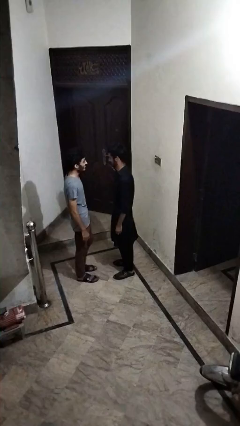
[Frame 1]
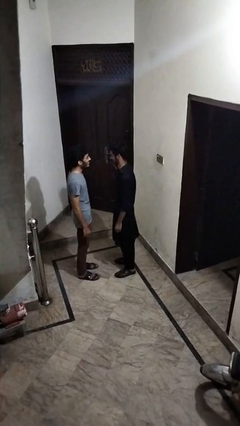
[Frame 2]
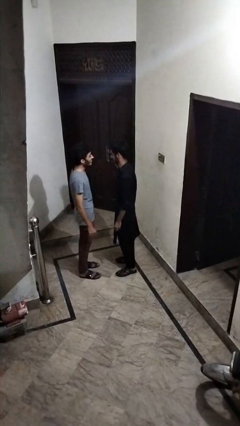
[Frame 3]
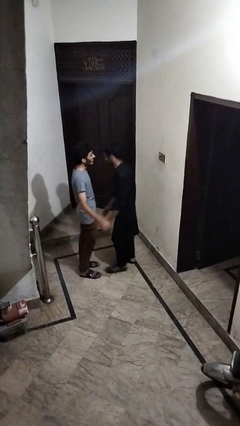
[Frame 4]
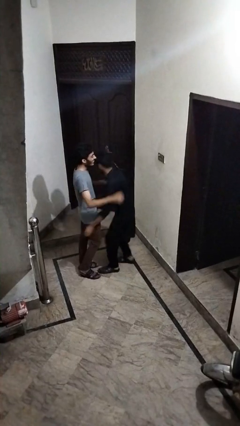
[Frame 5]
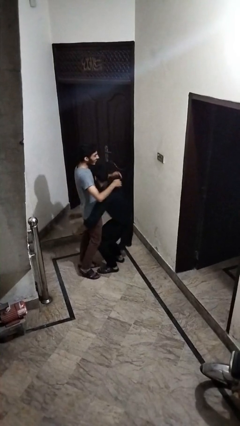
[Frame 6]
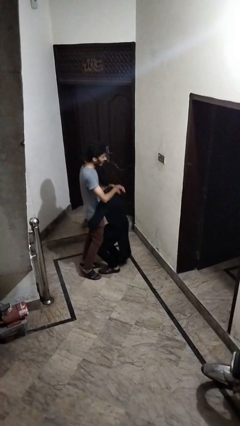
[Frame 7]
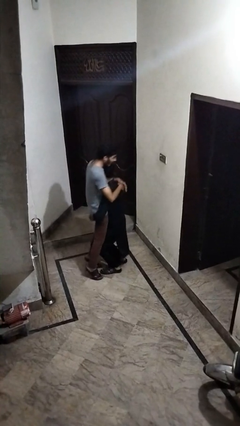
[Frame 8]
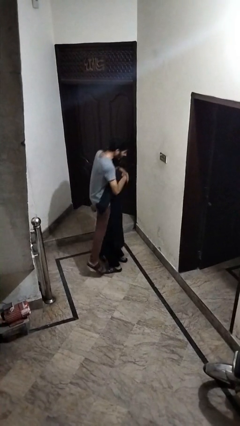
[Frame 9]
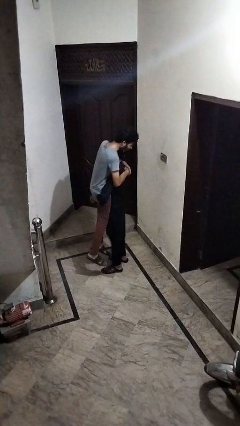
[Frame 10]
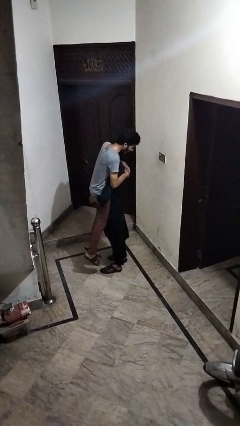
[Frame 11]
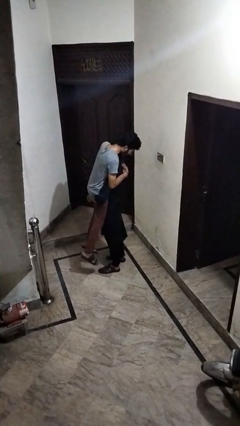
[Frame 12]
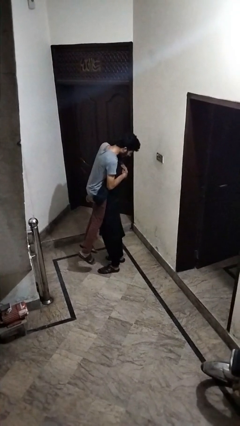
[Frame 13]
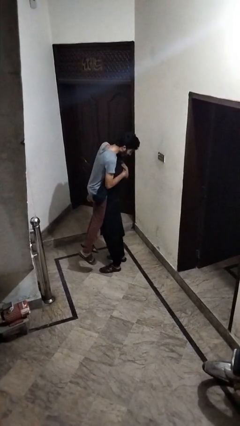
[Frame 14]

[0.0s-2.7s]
person picks up person

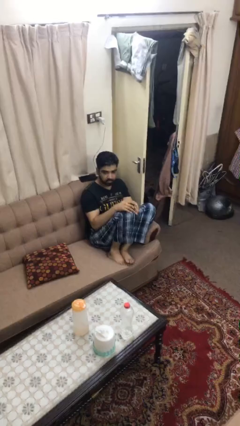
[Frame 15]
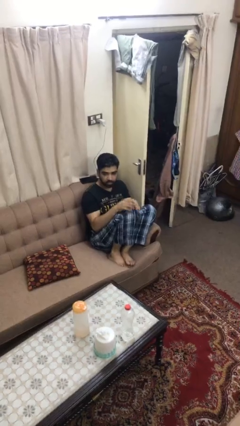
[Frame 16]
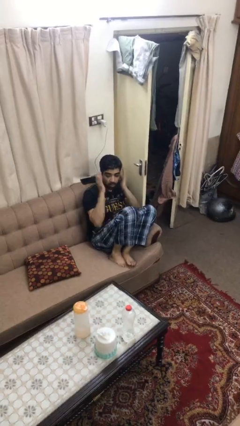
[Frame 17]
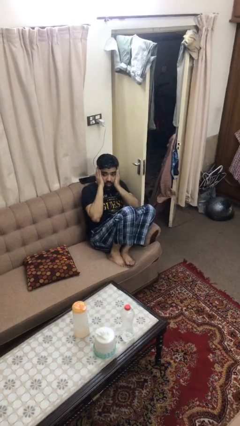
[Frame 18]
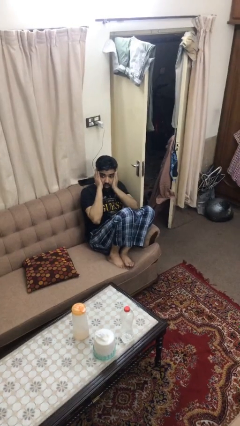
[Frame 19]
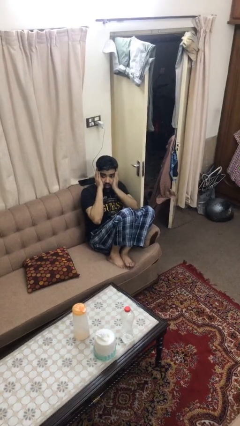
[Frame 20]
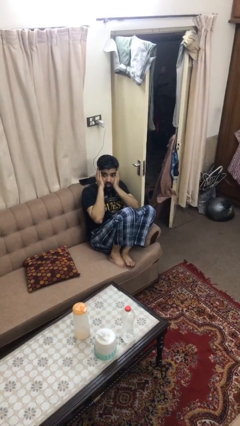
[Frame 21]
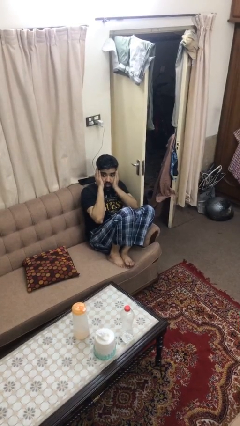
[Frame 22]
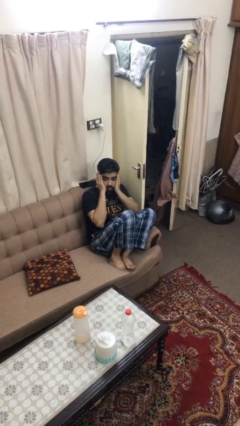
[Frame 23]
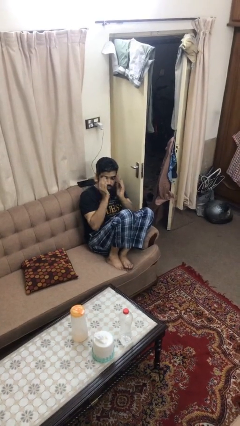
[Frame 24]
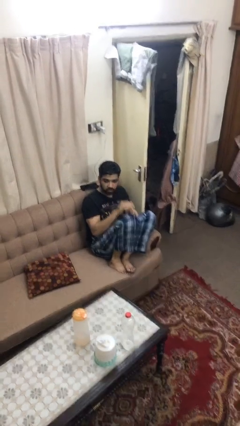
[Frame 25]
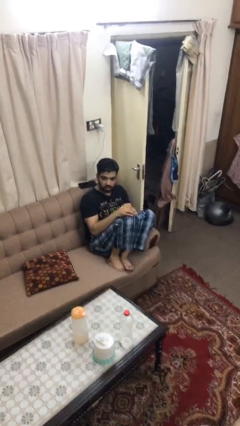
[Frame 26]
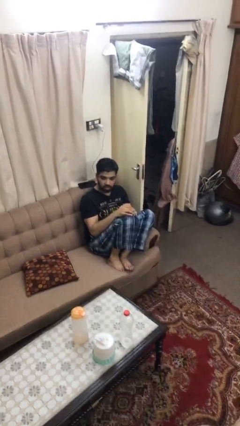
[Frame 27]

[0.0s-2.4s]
person covers face with hands

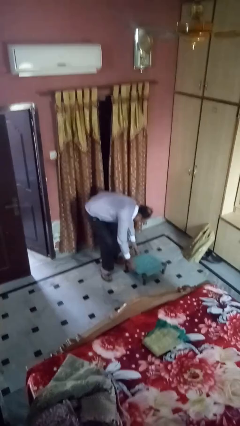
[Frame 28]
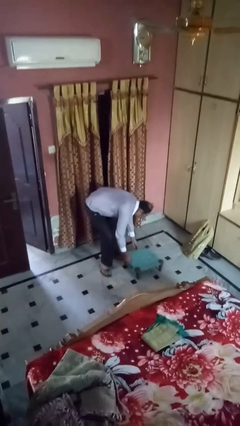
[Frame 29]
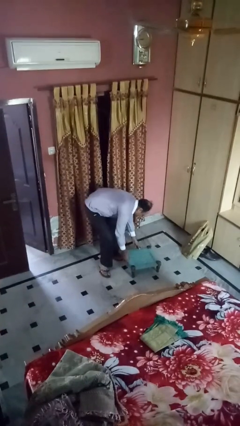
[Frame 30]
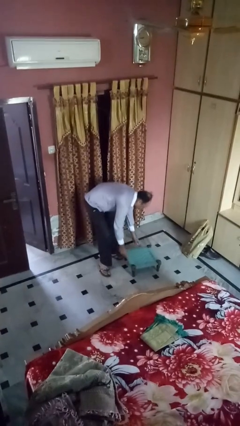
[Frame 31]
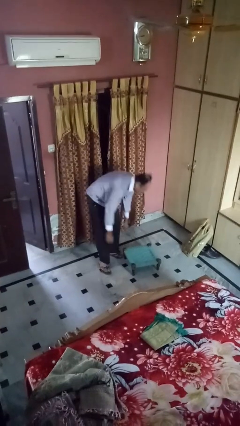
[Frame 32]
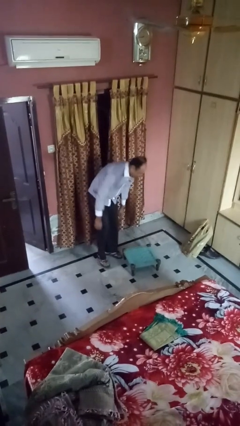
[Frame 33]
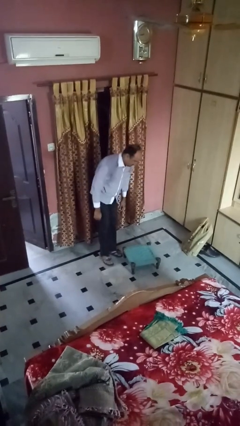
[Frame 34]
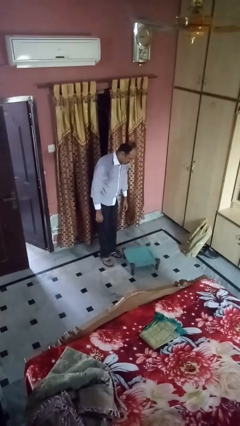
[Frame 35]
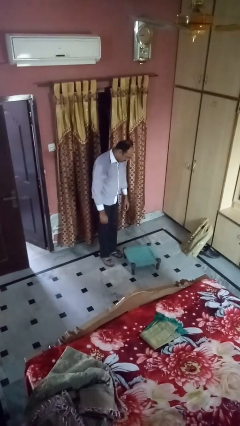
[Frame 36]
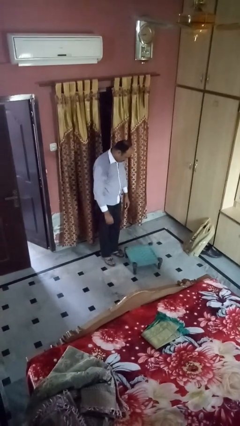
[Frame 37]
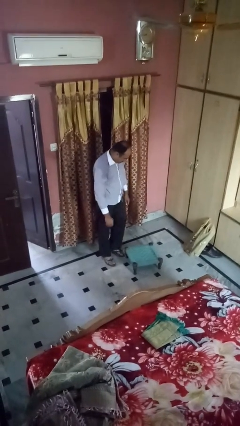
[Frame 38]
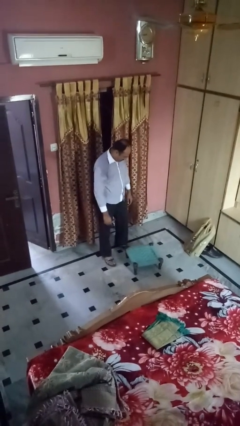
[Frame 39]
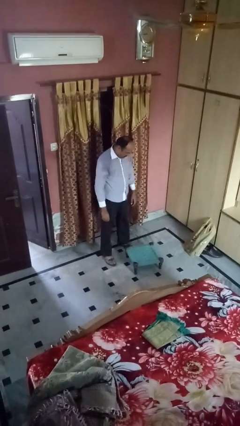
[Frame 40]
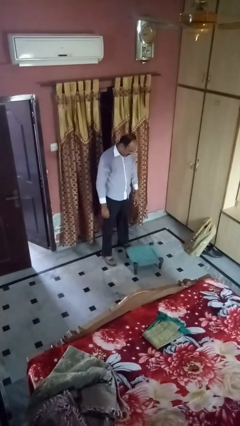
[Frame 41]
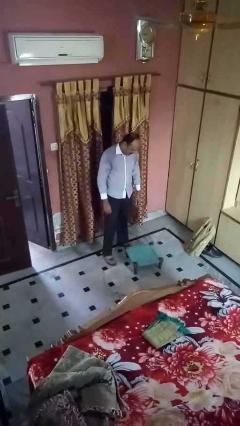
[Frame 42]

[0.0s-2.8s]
person sets upright furniture

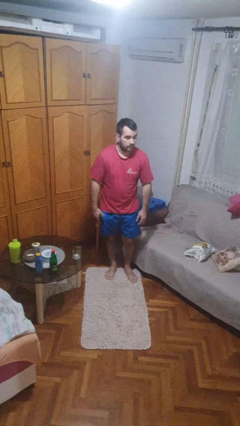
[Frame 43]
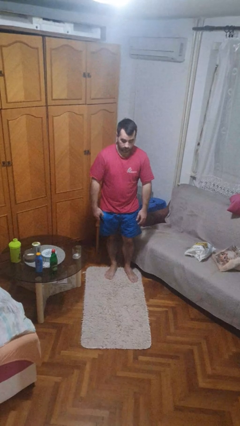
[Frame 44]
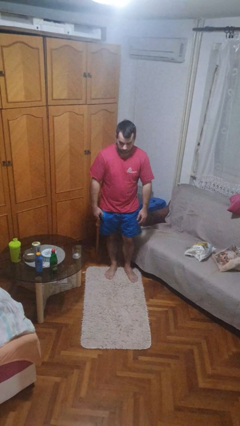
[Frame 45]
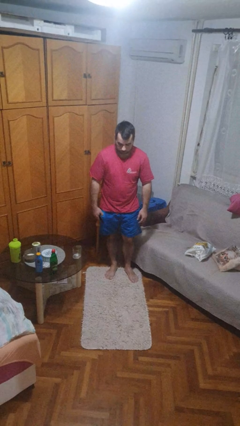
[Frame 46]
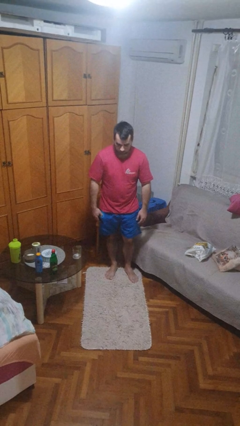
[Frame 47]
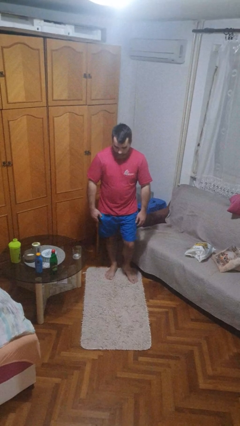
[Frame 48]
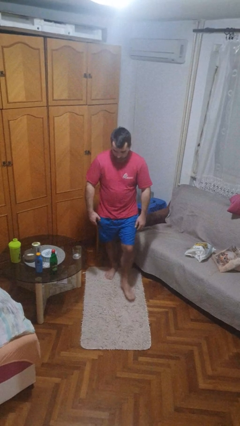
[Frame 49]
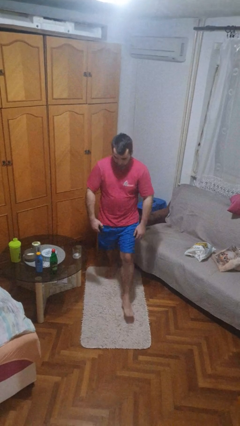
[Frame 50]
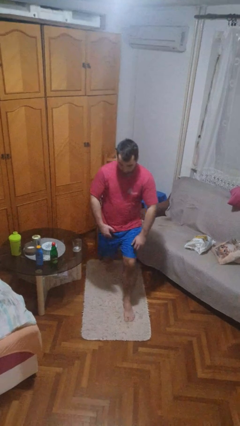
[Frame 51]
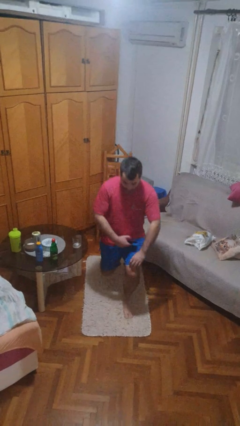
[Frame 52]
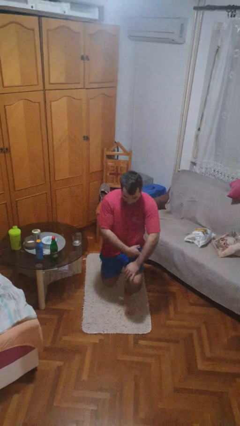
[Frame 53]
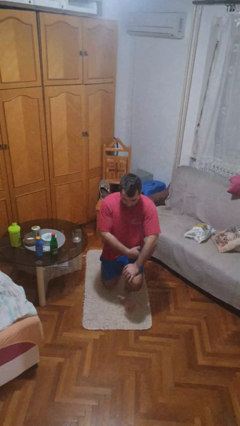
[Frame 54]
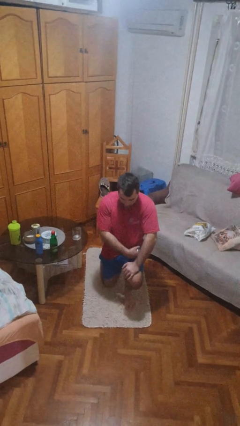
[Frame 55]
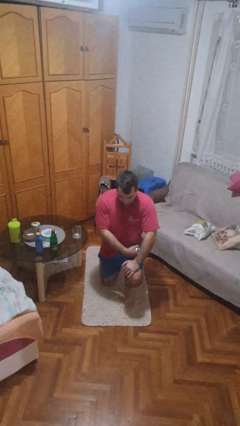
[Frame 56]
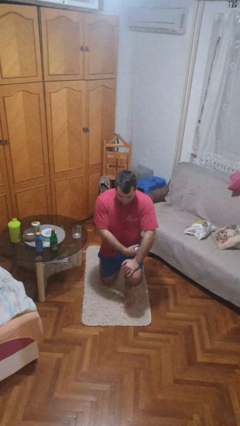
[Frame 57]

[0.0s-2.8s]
person kneels

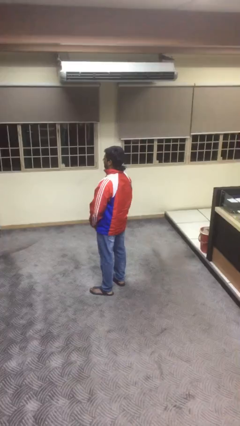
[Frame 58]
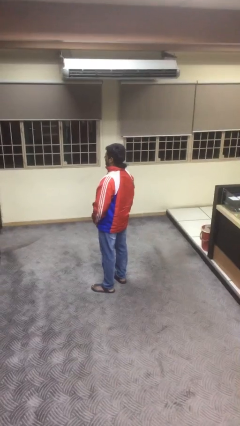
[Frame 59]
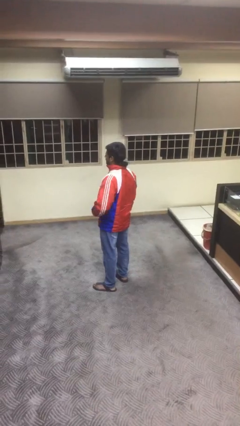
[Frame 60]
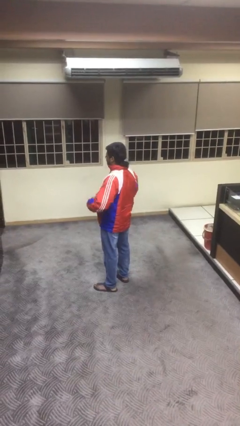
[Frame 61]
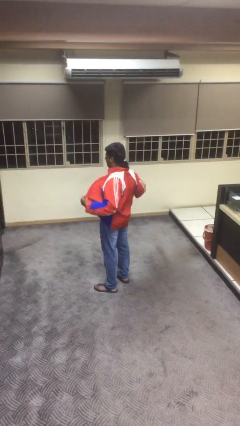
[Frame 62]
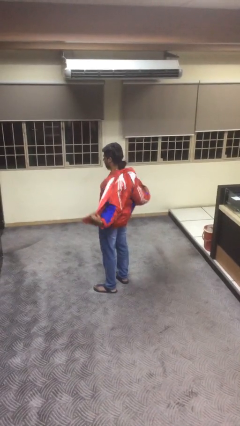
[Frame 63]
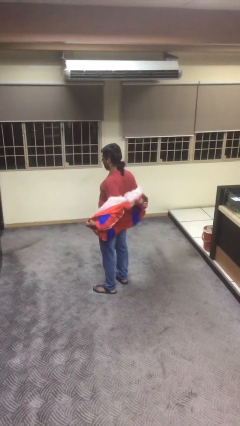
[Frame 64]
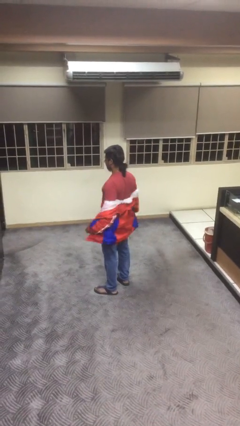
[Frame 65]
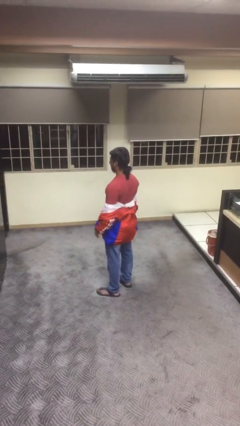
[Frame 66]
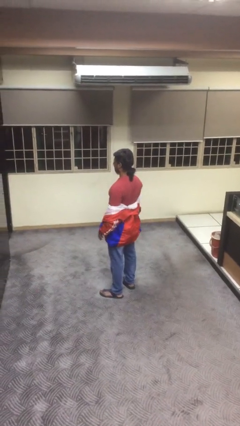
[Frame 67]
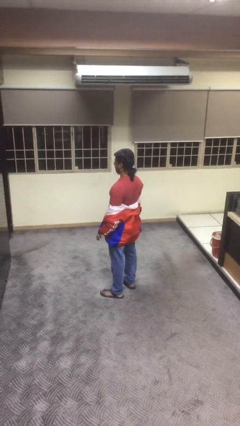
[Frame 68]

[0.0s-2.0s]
person takes off jacket

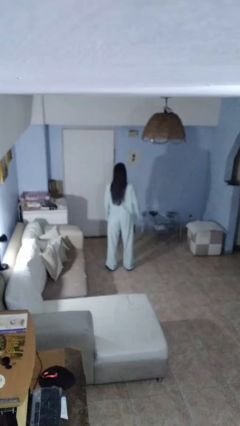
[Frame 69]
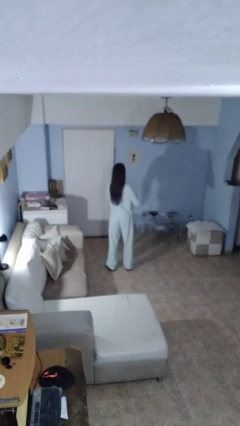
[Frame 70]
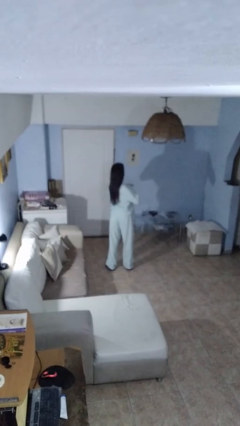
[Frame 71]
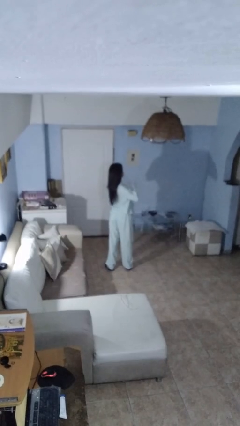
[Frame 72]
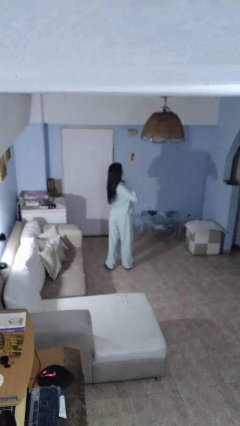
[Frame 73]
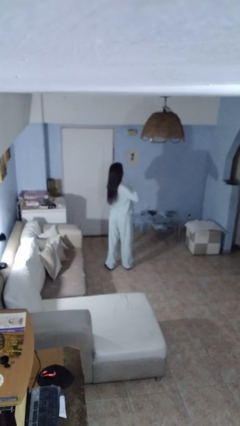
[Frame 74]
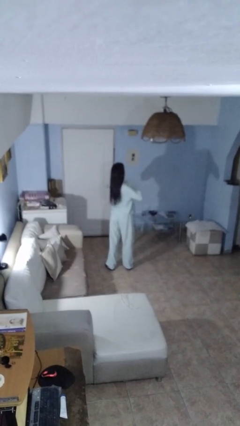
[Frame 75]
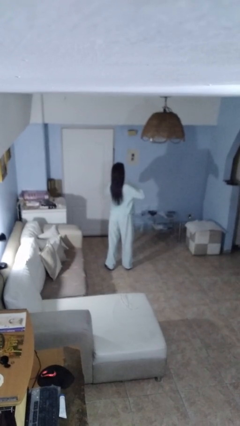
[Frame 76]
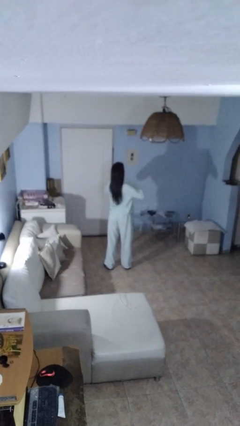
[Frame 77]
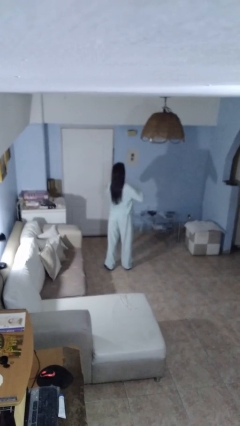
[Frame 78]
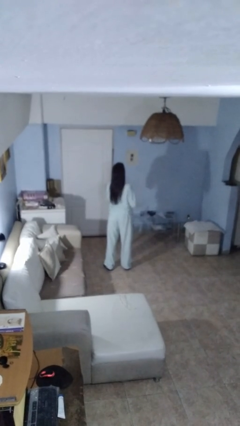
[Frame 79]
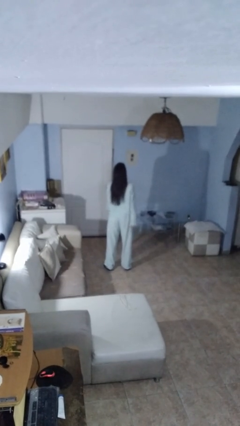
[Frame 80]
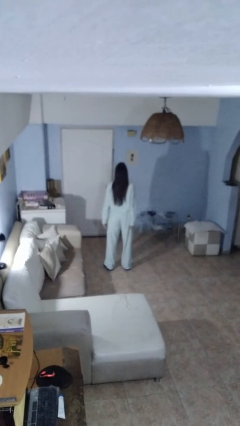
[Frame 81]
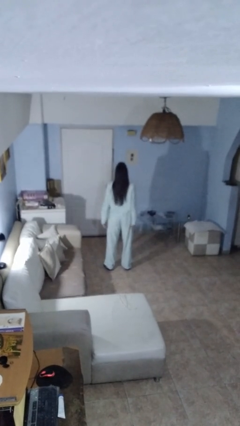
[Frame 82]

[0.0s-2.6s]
person drums on chest

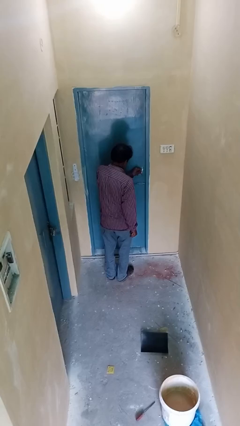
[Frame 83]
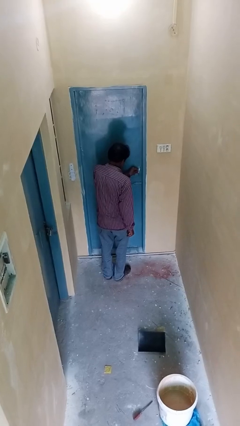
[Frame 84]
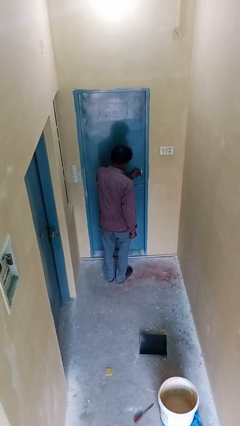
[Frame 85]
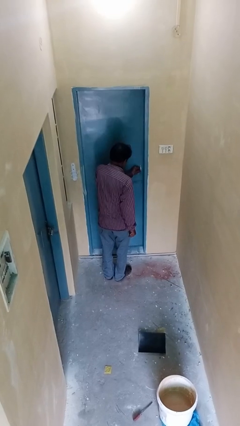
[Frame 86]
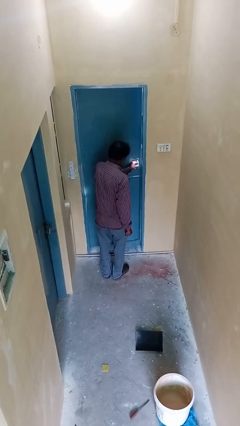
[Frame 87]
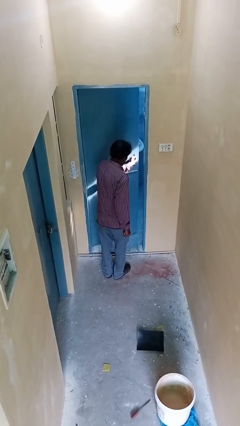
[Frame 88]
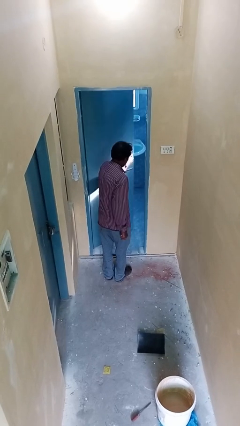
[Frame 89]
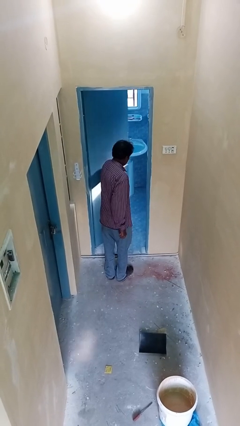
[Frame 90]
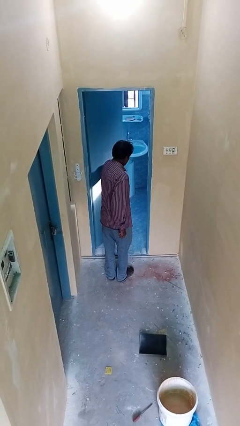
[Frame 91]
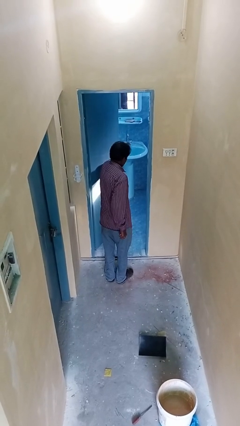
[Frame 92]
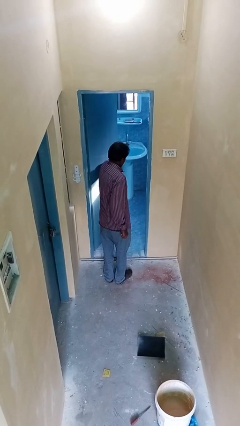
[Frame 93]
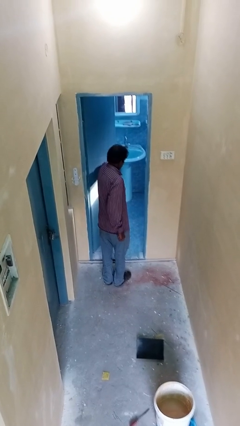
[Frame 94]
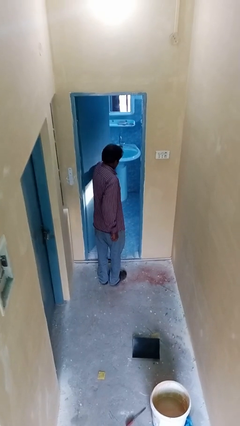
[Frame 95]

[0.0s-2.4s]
person opens facility door
